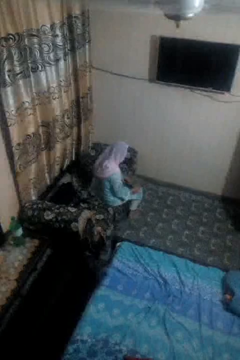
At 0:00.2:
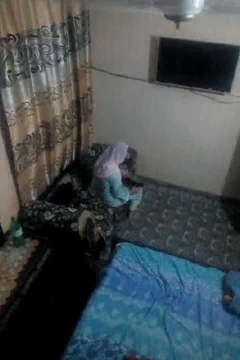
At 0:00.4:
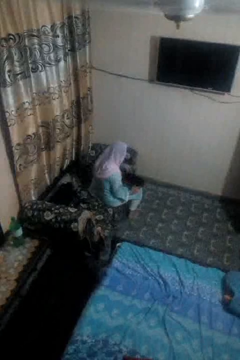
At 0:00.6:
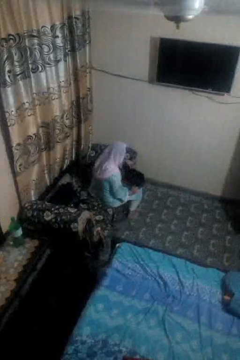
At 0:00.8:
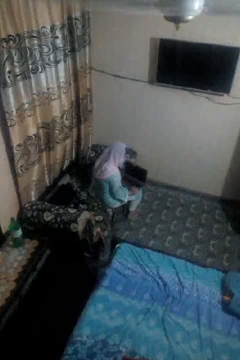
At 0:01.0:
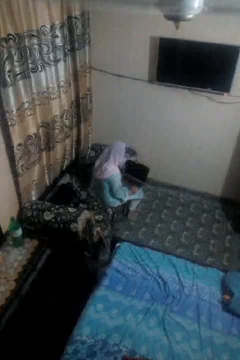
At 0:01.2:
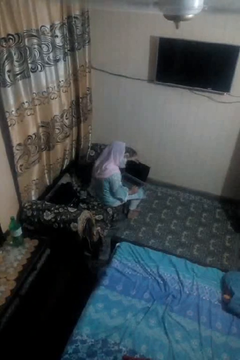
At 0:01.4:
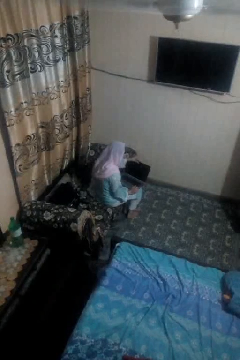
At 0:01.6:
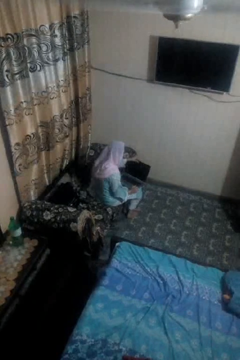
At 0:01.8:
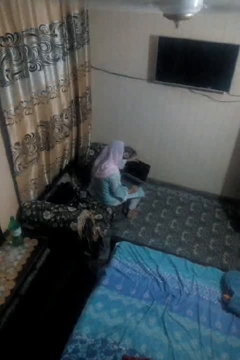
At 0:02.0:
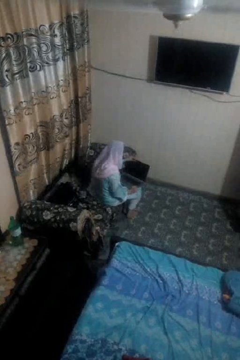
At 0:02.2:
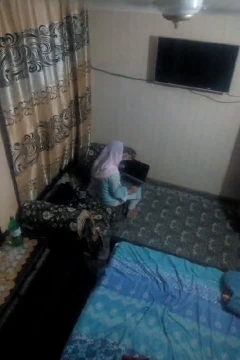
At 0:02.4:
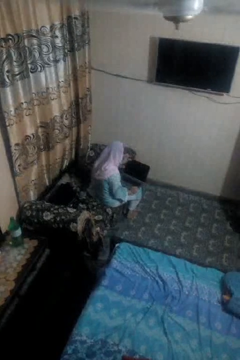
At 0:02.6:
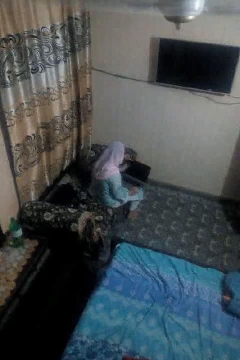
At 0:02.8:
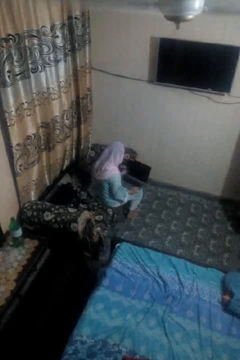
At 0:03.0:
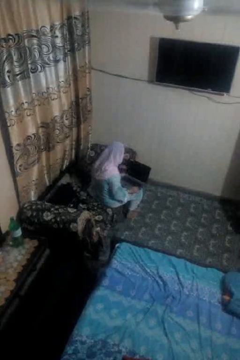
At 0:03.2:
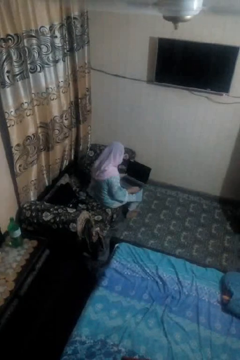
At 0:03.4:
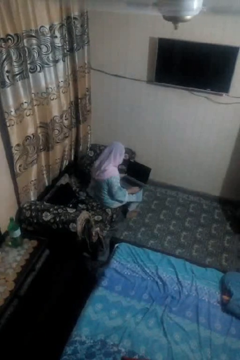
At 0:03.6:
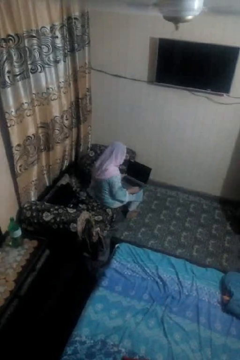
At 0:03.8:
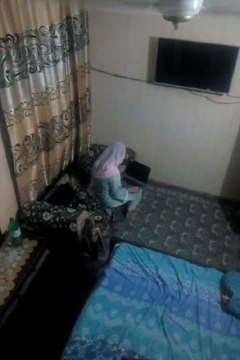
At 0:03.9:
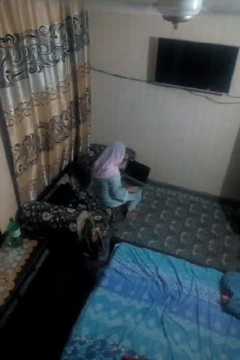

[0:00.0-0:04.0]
person opens laptop

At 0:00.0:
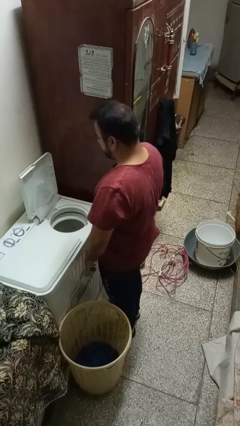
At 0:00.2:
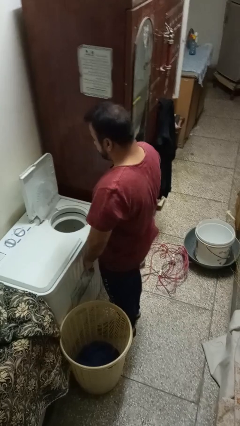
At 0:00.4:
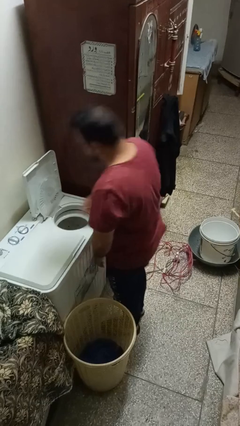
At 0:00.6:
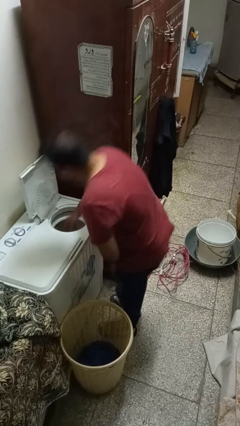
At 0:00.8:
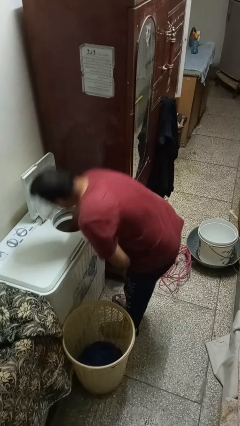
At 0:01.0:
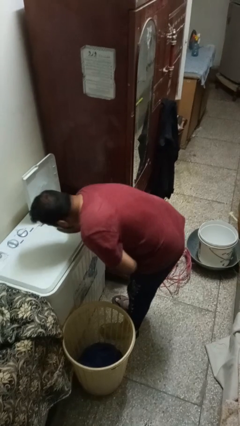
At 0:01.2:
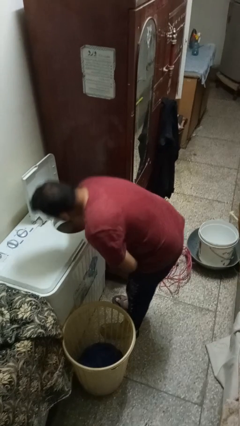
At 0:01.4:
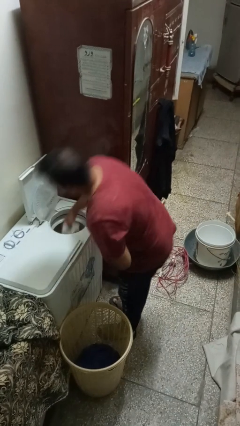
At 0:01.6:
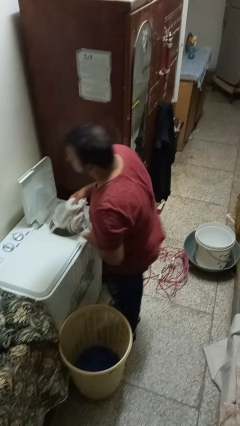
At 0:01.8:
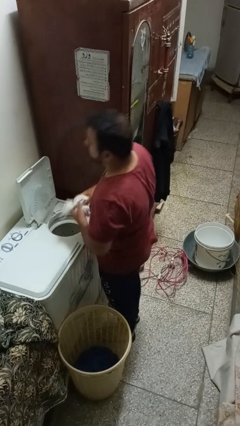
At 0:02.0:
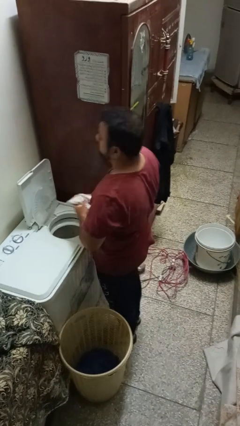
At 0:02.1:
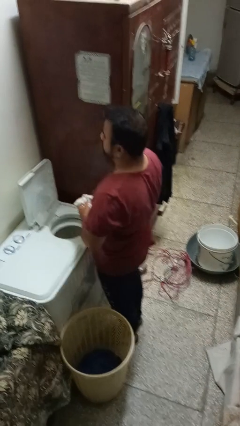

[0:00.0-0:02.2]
person unloads dryer

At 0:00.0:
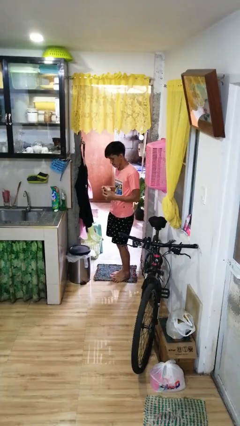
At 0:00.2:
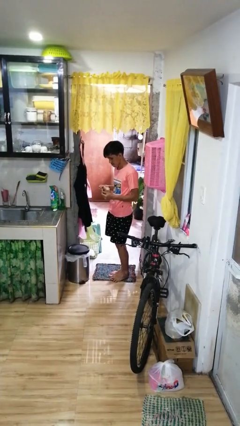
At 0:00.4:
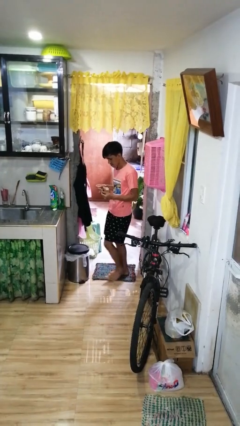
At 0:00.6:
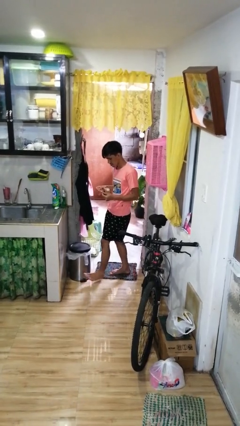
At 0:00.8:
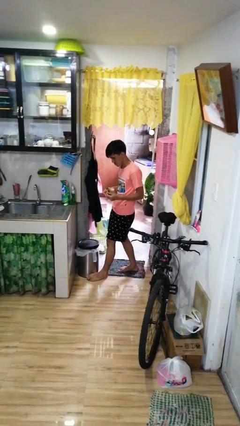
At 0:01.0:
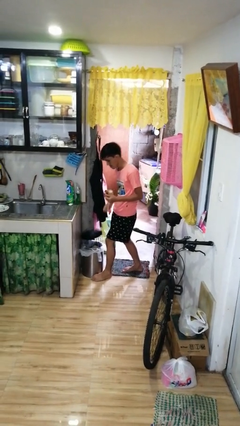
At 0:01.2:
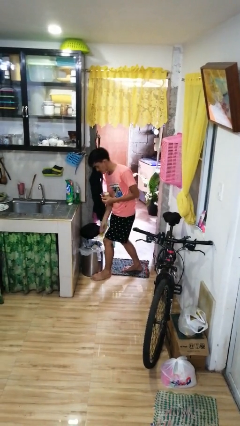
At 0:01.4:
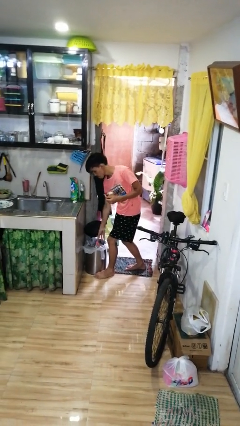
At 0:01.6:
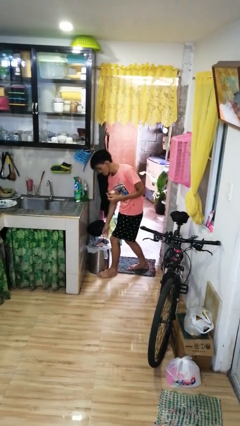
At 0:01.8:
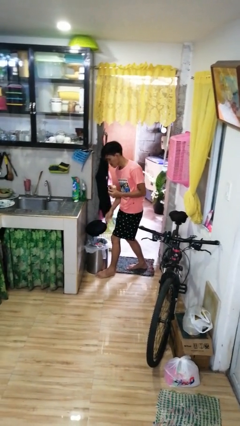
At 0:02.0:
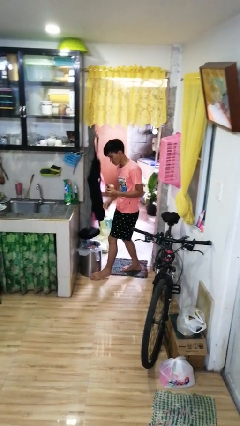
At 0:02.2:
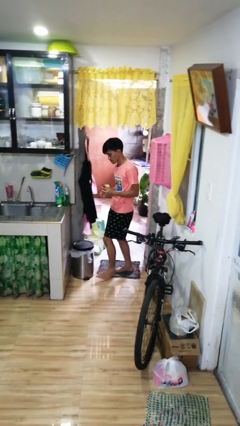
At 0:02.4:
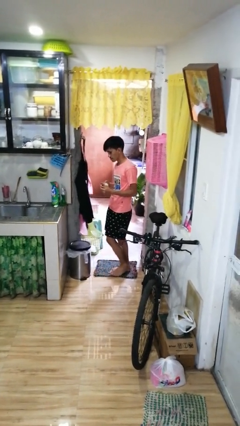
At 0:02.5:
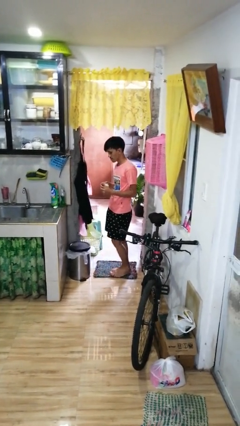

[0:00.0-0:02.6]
person discards trash

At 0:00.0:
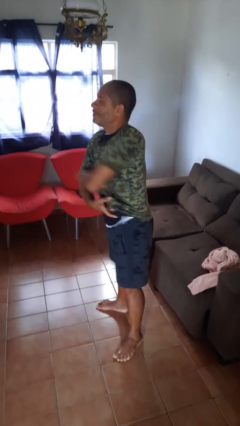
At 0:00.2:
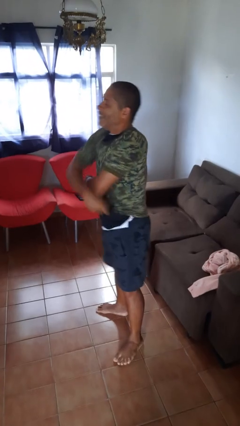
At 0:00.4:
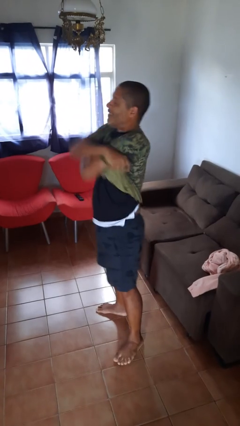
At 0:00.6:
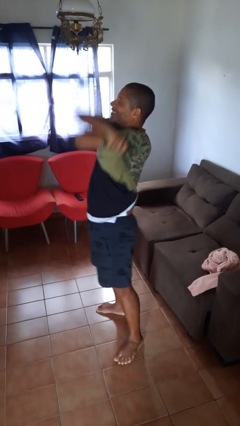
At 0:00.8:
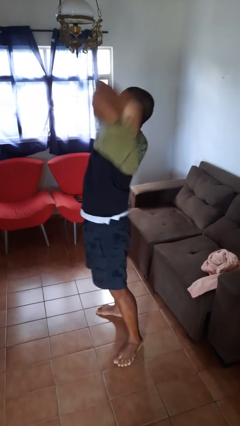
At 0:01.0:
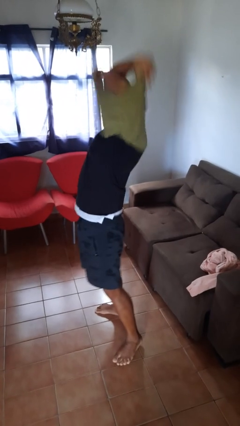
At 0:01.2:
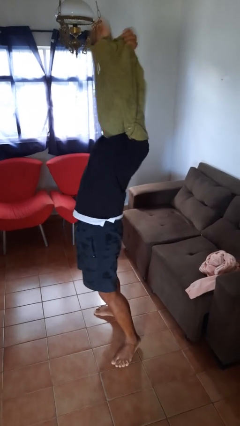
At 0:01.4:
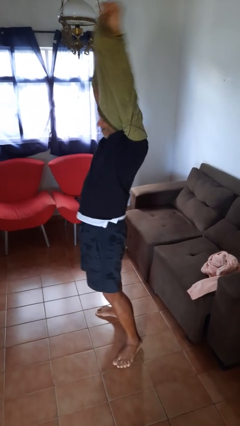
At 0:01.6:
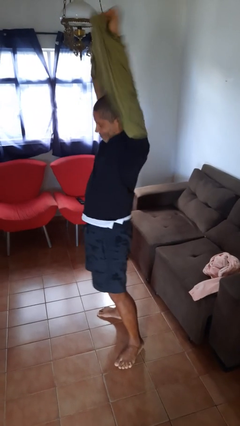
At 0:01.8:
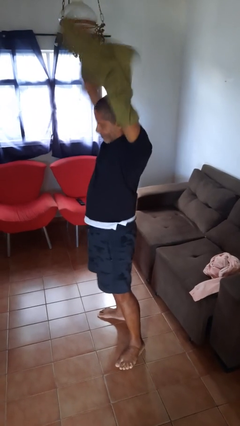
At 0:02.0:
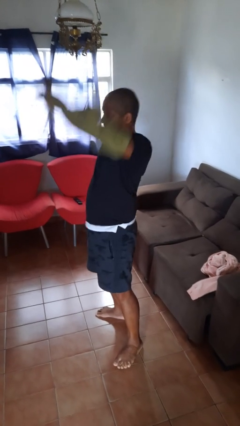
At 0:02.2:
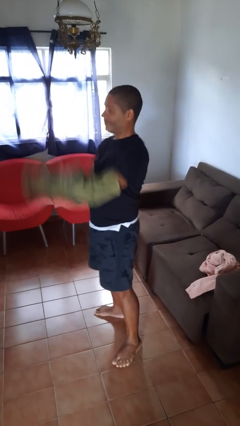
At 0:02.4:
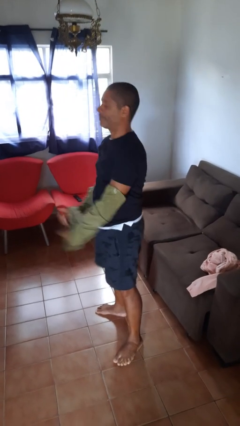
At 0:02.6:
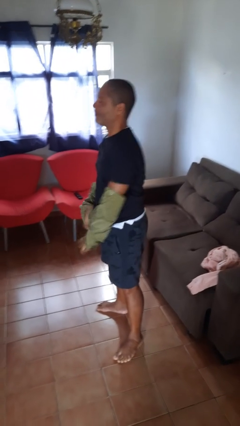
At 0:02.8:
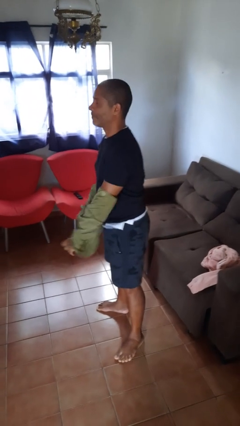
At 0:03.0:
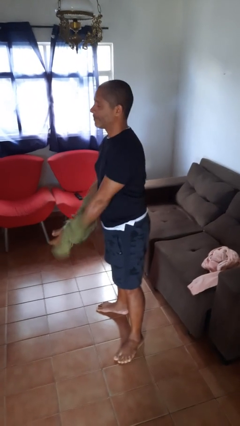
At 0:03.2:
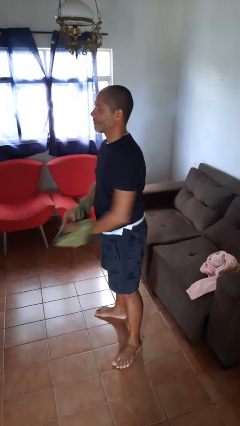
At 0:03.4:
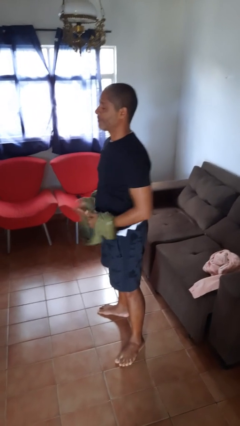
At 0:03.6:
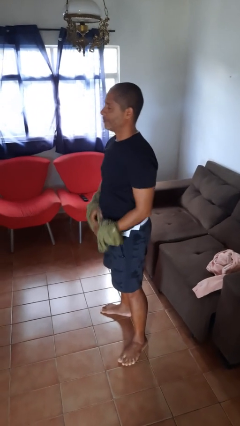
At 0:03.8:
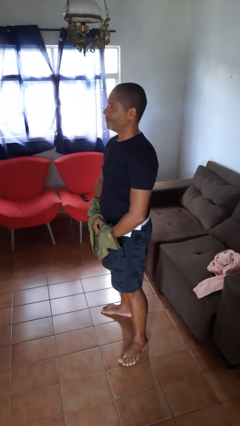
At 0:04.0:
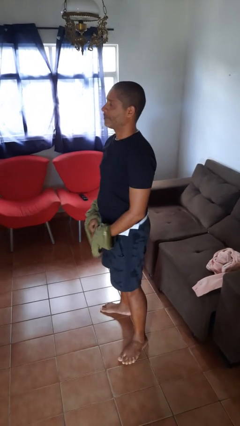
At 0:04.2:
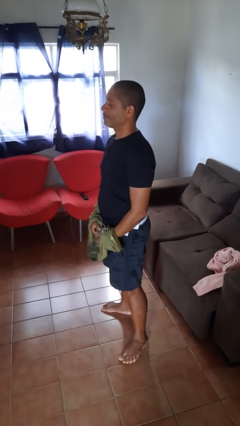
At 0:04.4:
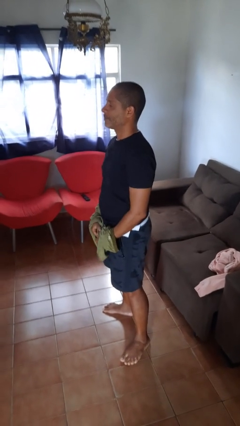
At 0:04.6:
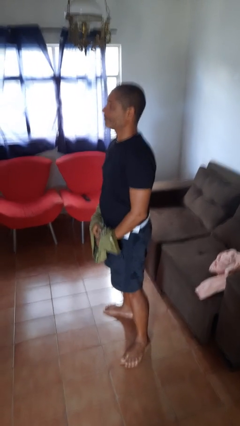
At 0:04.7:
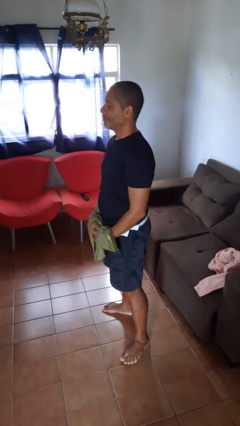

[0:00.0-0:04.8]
person takes off shirt

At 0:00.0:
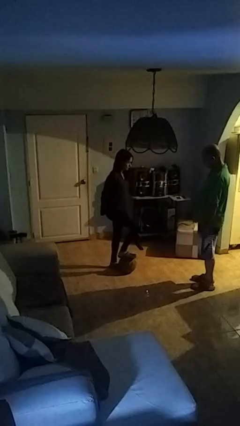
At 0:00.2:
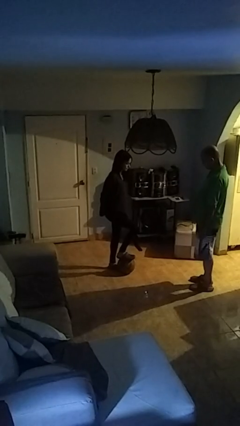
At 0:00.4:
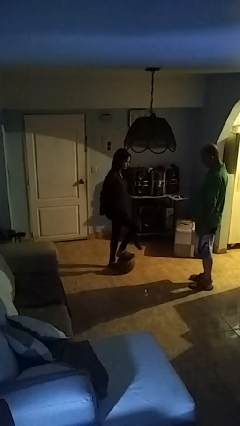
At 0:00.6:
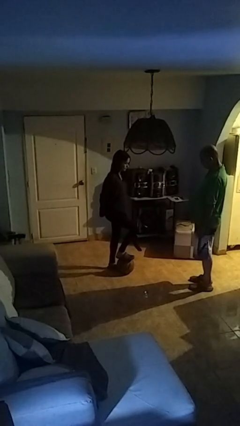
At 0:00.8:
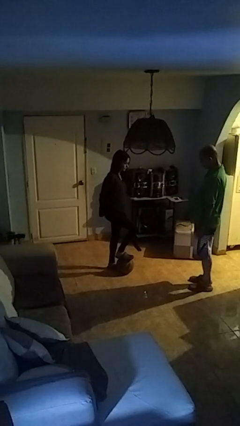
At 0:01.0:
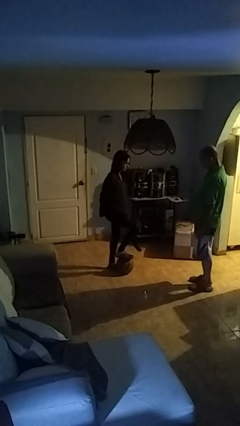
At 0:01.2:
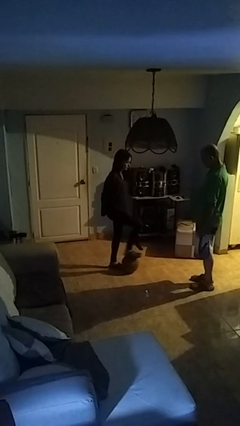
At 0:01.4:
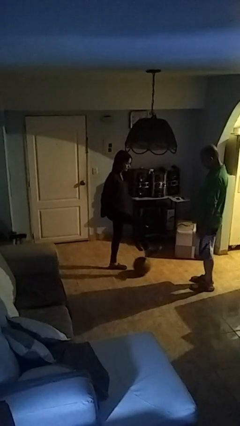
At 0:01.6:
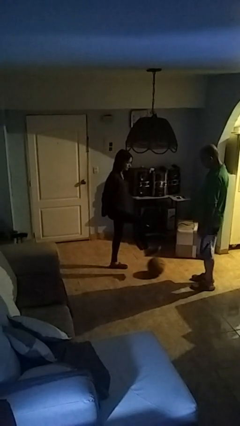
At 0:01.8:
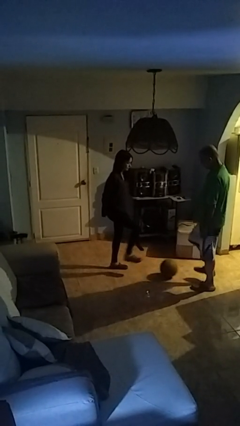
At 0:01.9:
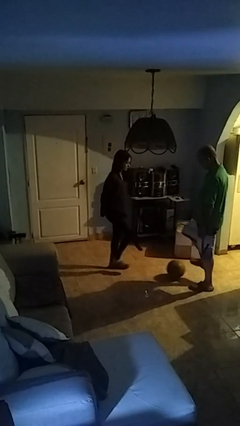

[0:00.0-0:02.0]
person kicks object to person

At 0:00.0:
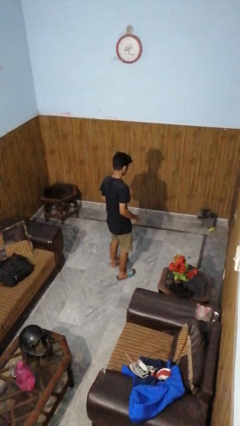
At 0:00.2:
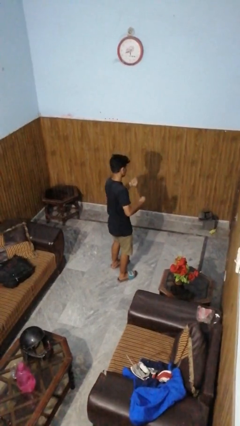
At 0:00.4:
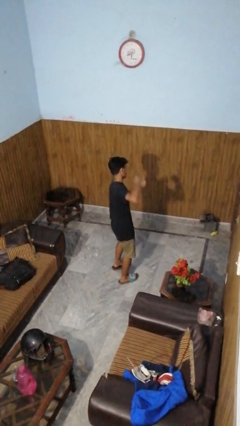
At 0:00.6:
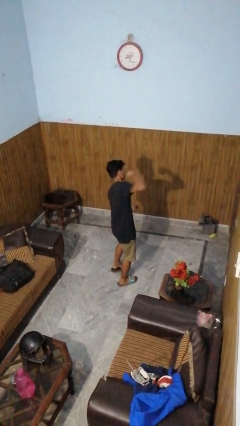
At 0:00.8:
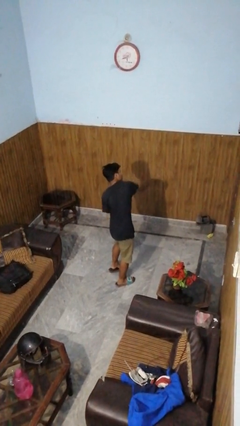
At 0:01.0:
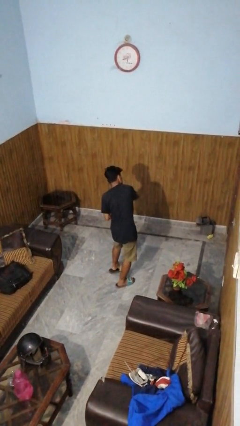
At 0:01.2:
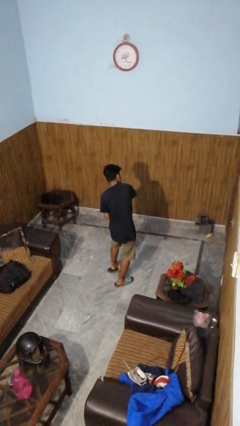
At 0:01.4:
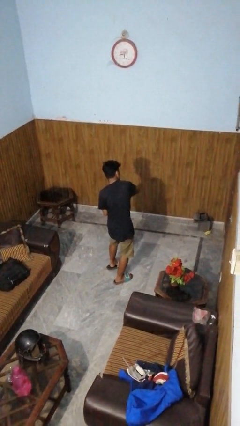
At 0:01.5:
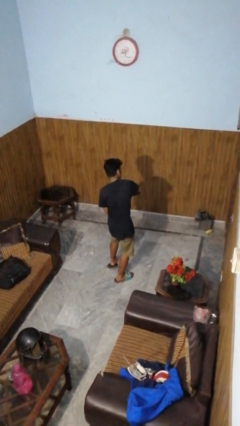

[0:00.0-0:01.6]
person punches

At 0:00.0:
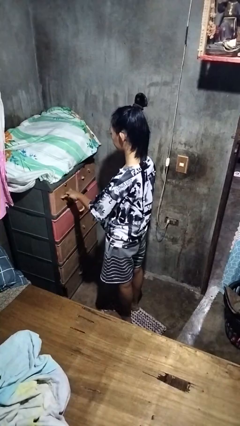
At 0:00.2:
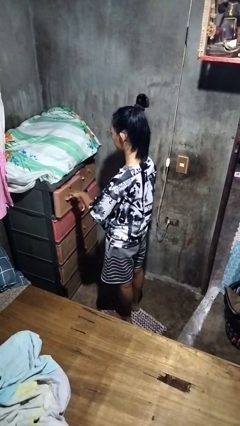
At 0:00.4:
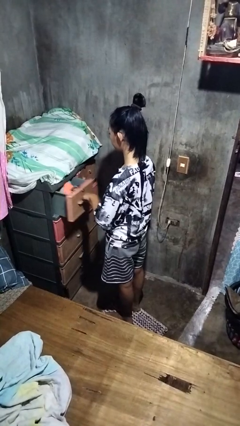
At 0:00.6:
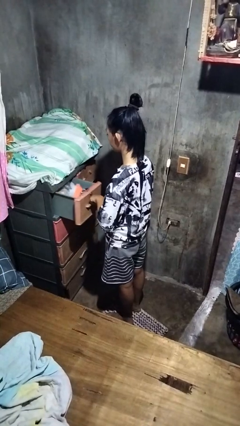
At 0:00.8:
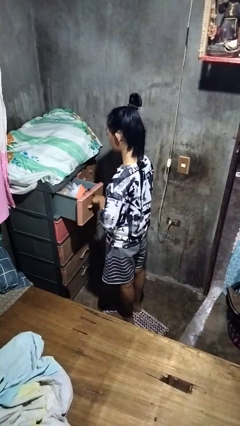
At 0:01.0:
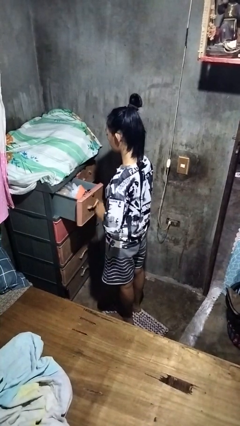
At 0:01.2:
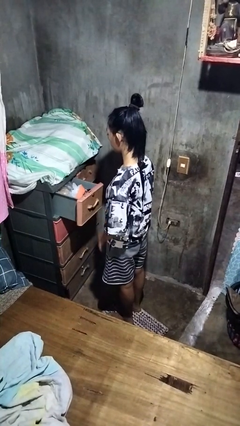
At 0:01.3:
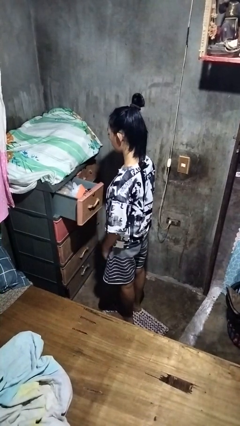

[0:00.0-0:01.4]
person opens dresser drawer
